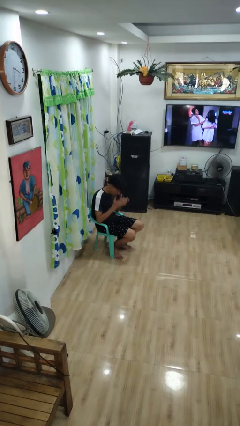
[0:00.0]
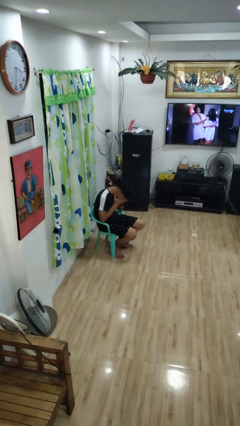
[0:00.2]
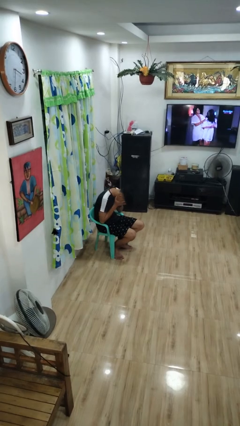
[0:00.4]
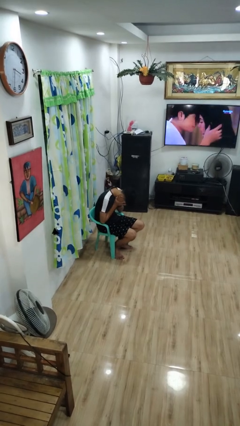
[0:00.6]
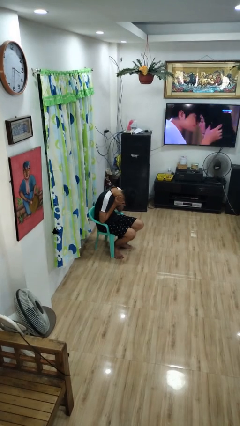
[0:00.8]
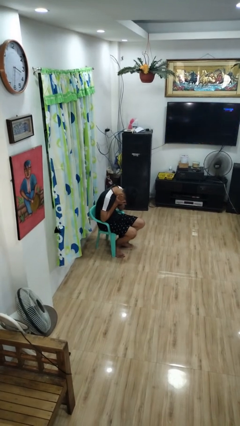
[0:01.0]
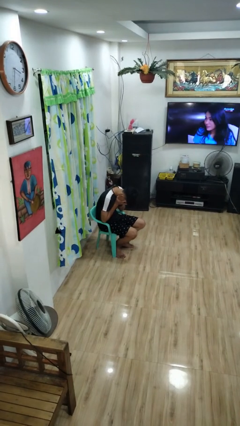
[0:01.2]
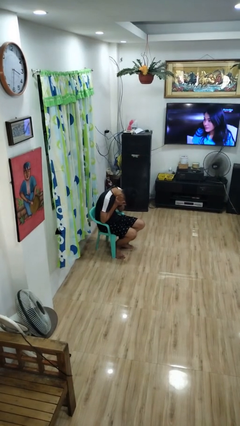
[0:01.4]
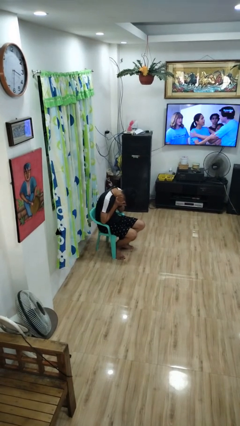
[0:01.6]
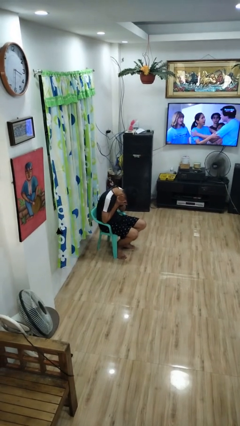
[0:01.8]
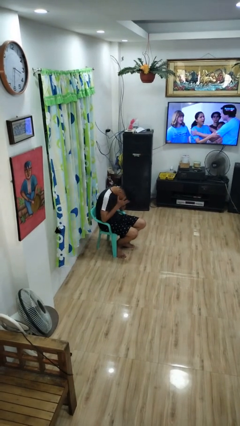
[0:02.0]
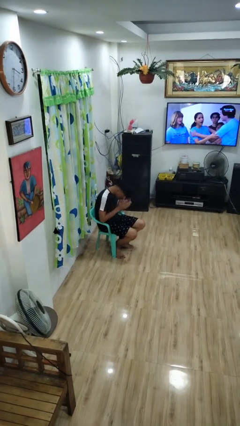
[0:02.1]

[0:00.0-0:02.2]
person covers face with hands

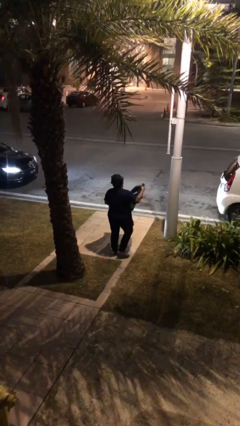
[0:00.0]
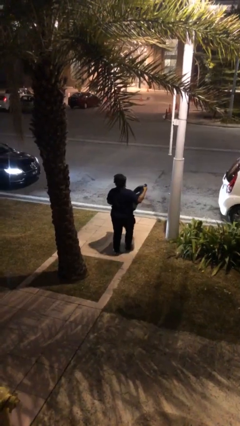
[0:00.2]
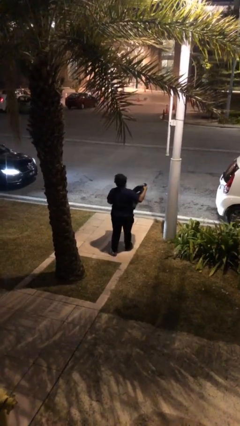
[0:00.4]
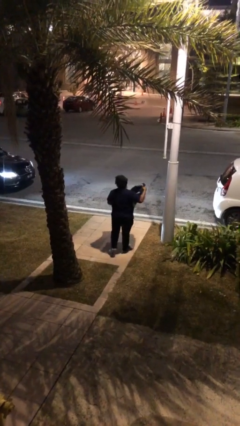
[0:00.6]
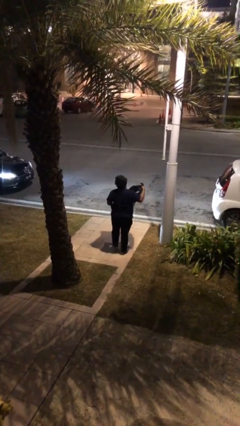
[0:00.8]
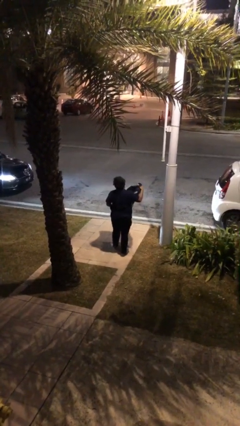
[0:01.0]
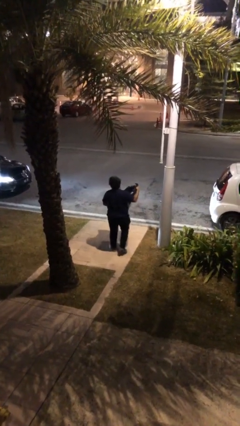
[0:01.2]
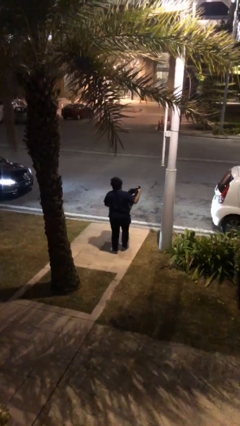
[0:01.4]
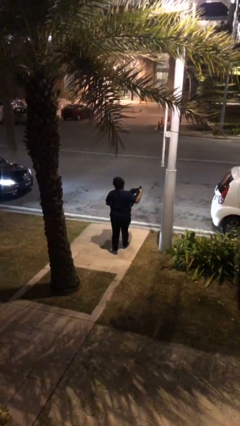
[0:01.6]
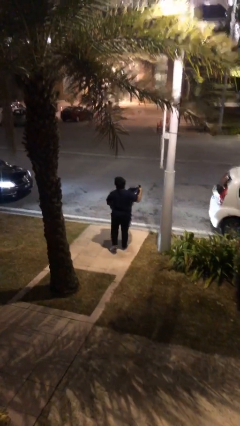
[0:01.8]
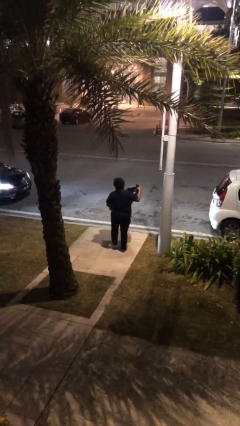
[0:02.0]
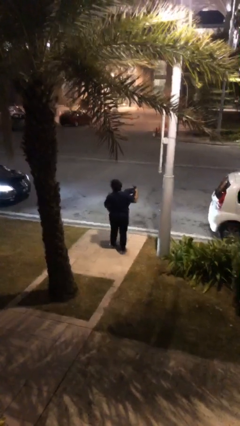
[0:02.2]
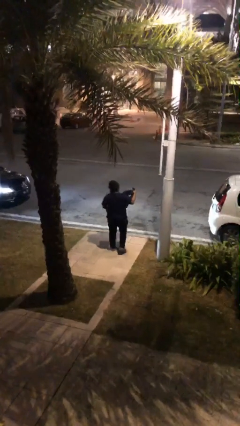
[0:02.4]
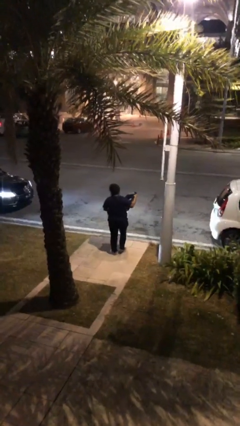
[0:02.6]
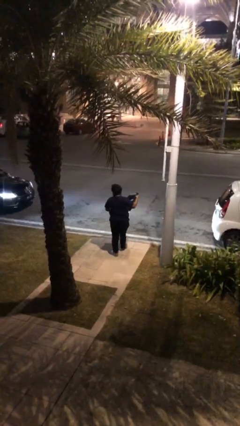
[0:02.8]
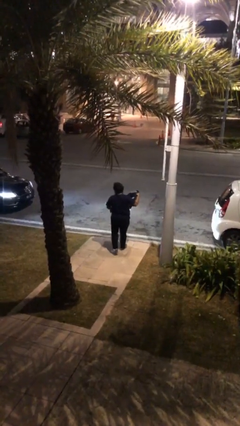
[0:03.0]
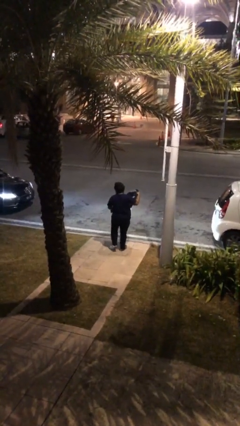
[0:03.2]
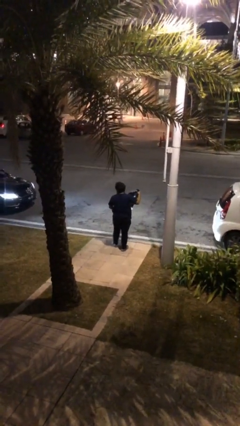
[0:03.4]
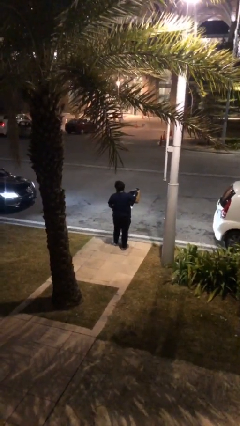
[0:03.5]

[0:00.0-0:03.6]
person carries heavy object

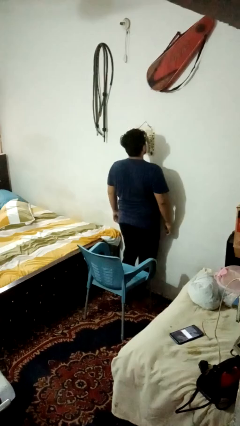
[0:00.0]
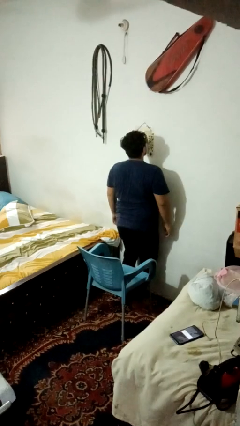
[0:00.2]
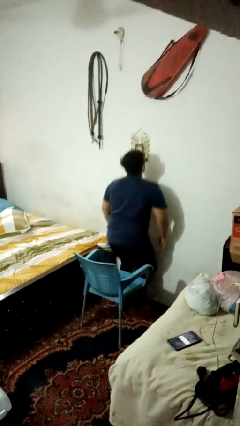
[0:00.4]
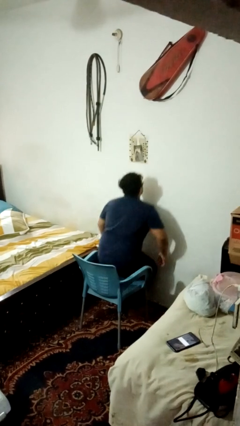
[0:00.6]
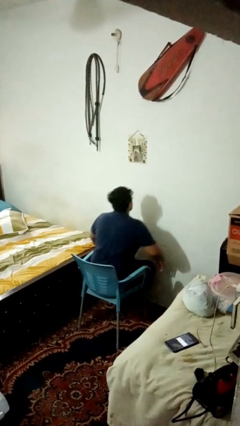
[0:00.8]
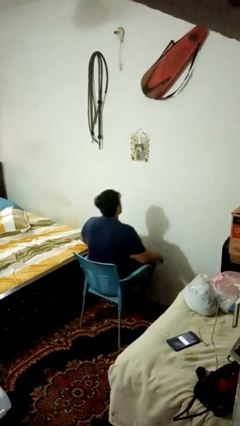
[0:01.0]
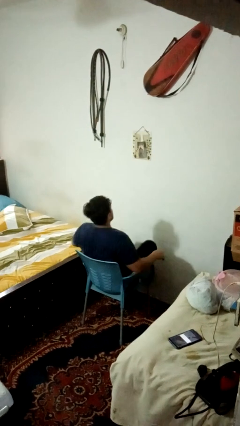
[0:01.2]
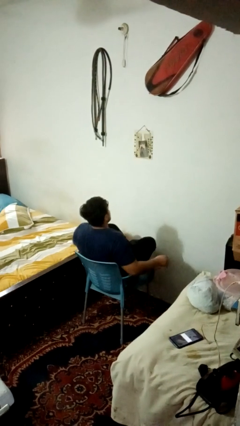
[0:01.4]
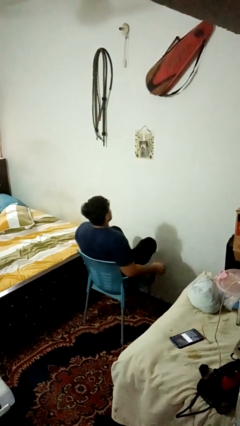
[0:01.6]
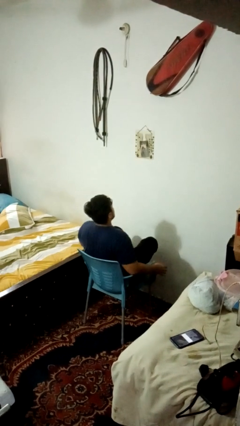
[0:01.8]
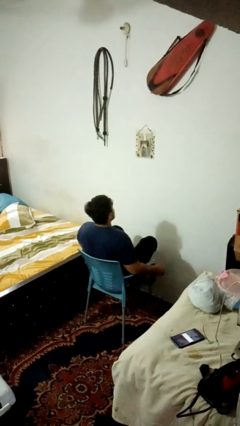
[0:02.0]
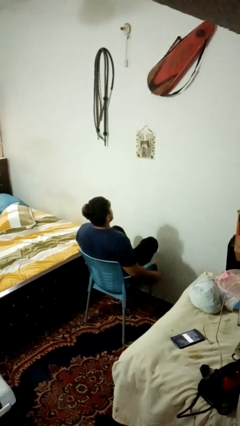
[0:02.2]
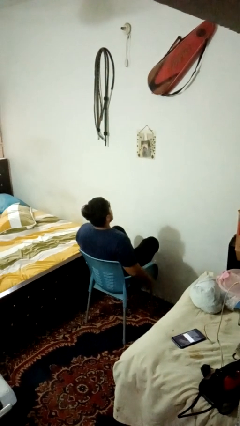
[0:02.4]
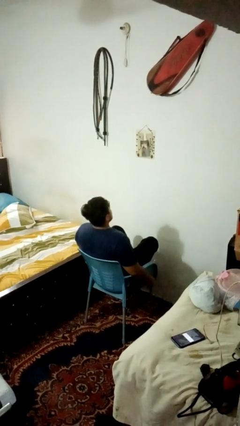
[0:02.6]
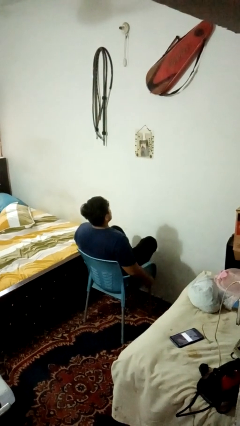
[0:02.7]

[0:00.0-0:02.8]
person crosses legs

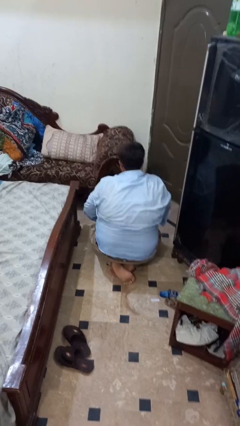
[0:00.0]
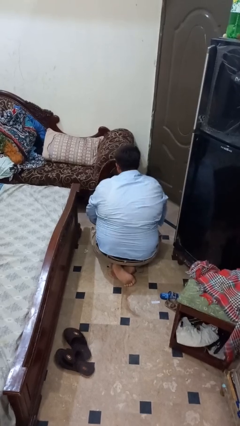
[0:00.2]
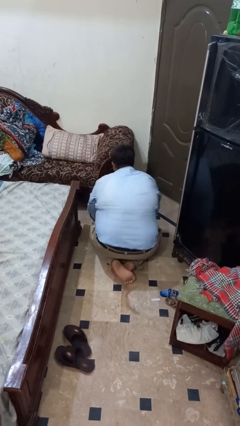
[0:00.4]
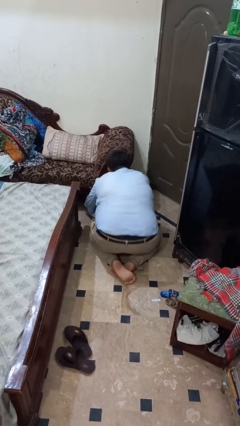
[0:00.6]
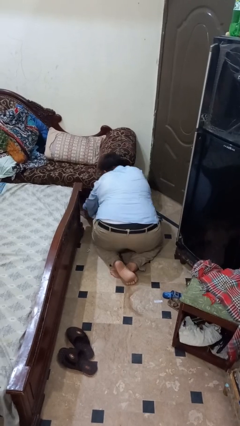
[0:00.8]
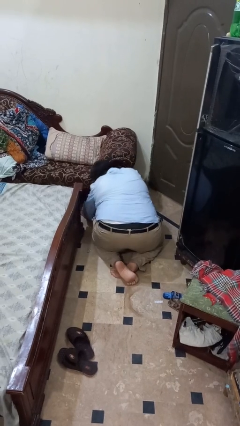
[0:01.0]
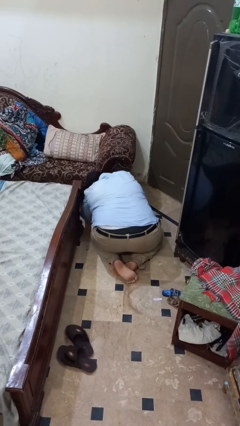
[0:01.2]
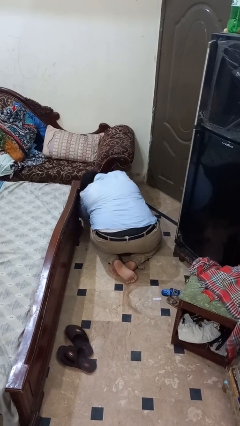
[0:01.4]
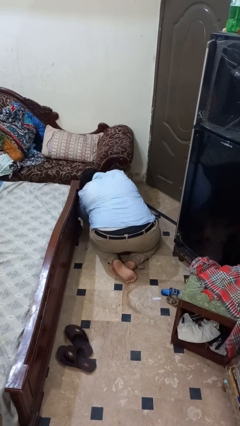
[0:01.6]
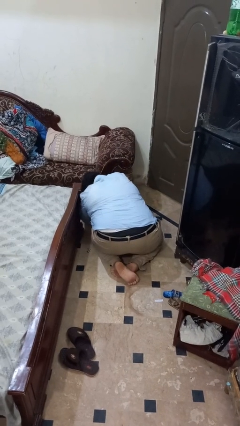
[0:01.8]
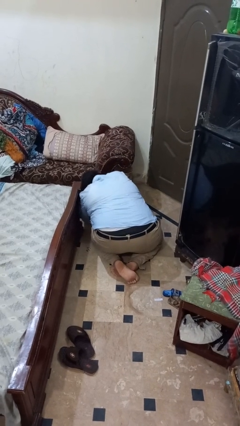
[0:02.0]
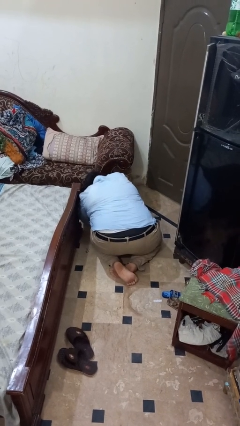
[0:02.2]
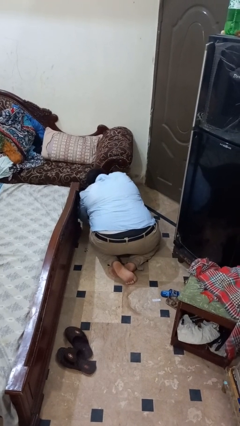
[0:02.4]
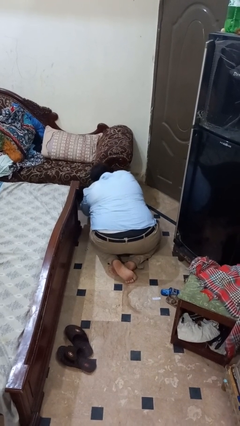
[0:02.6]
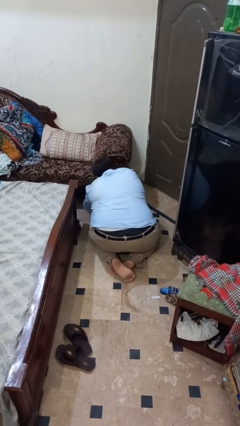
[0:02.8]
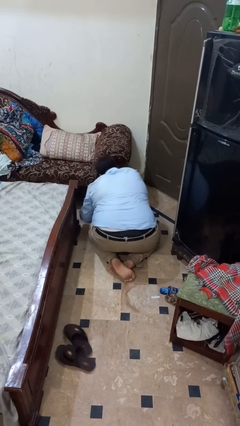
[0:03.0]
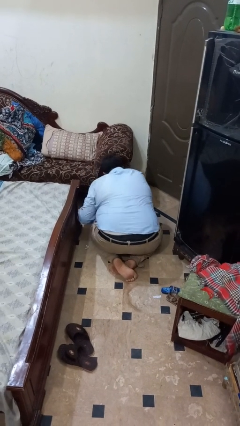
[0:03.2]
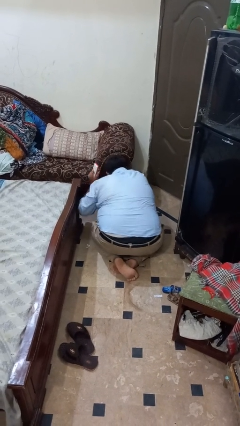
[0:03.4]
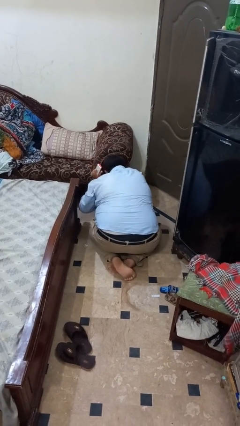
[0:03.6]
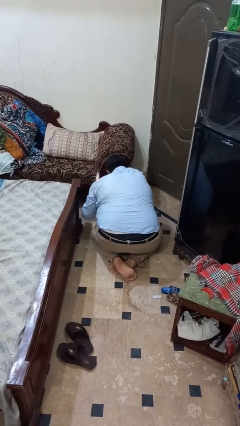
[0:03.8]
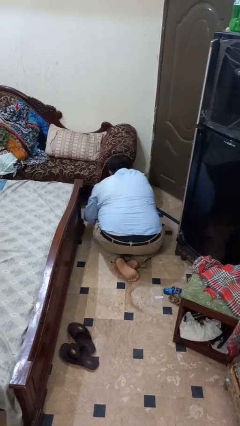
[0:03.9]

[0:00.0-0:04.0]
person searches under couch

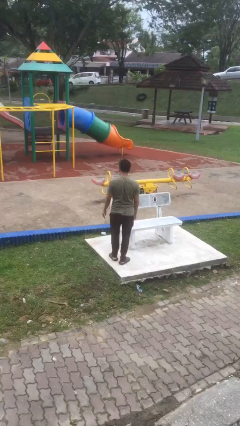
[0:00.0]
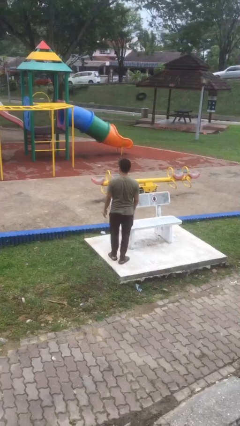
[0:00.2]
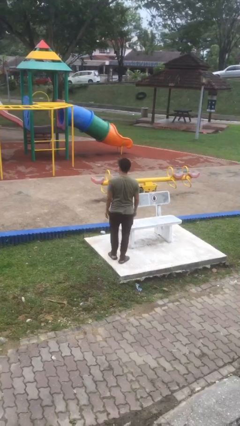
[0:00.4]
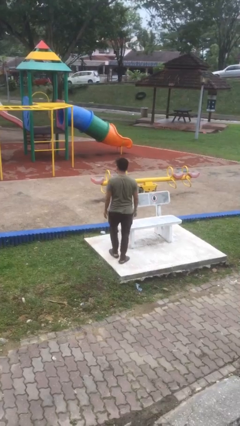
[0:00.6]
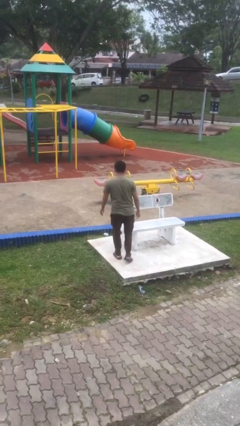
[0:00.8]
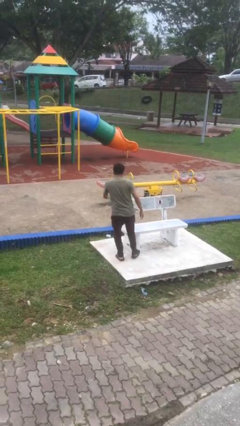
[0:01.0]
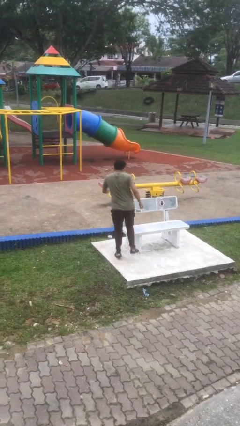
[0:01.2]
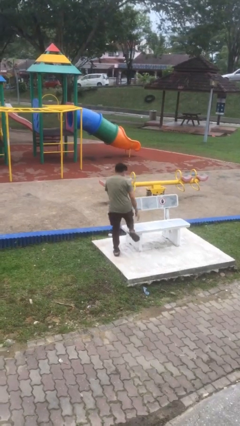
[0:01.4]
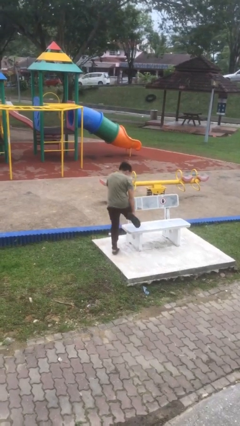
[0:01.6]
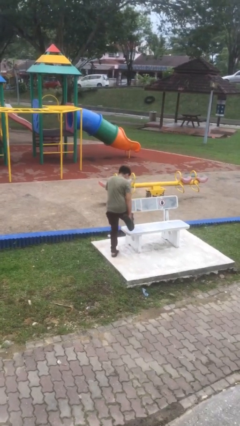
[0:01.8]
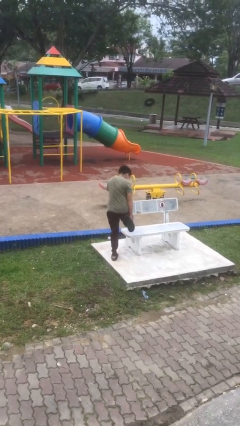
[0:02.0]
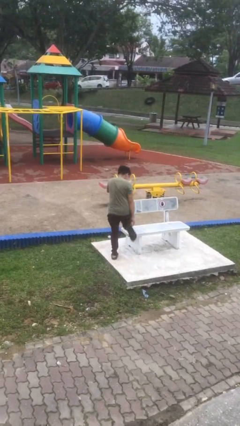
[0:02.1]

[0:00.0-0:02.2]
person stubs toe

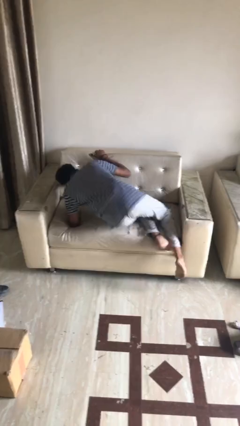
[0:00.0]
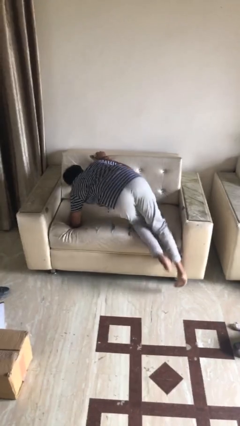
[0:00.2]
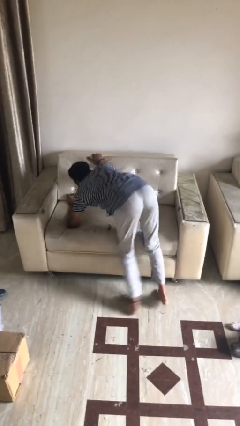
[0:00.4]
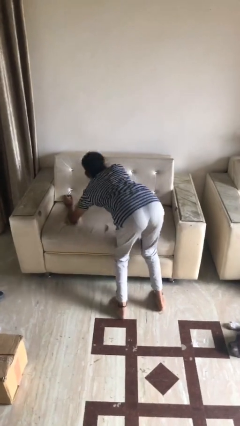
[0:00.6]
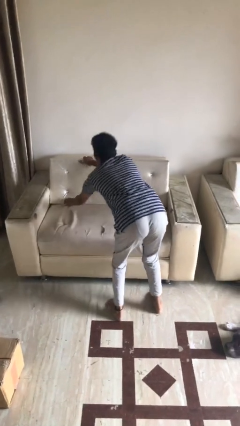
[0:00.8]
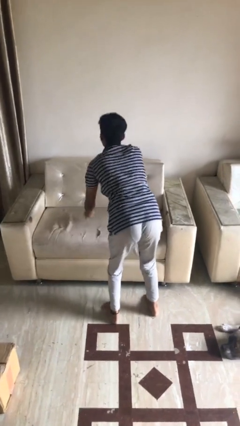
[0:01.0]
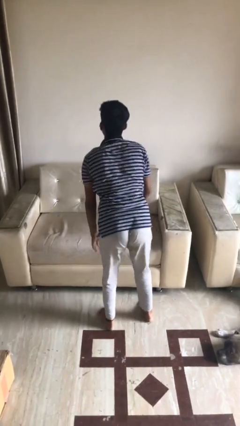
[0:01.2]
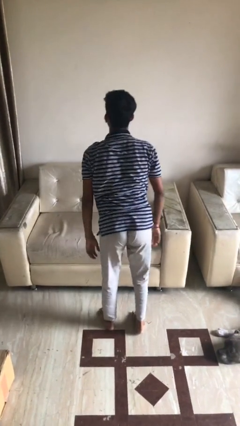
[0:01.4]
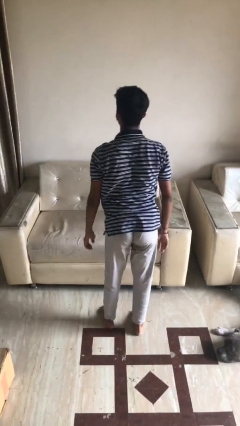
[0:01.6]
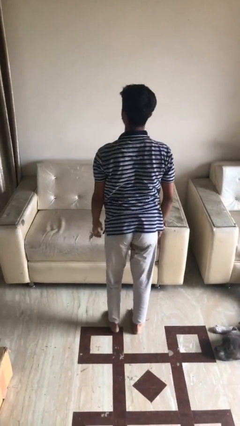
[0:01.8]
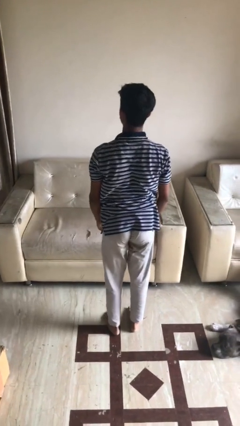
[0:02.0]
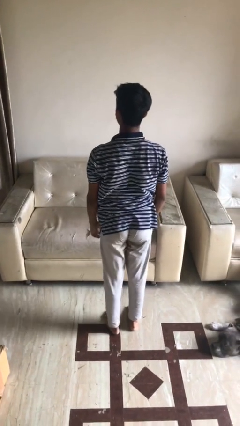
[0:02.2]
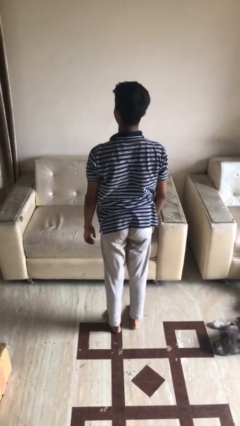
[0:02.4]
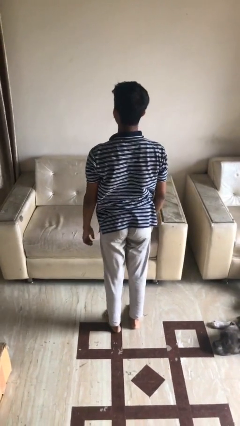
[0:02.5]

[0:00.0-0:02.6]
person stands up

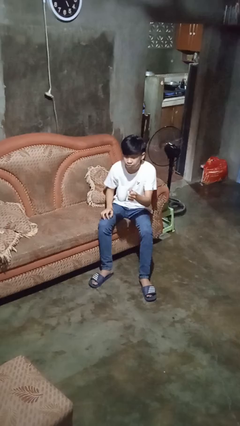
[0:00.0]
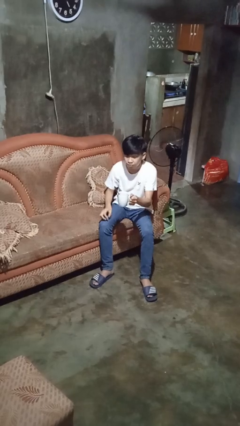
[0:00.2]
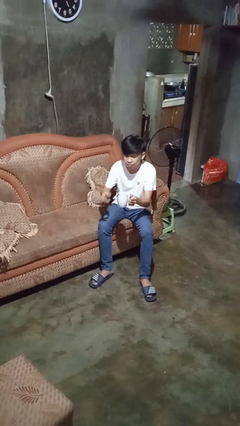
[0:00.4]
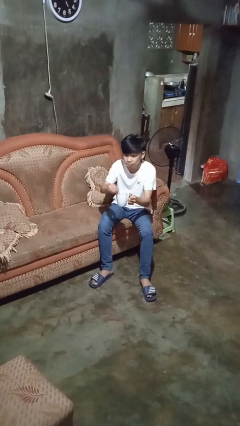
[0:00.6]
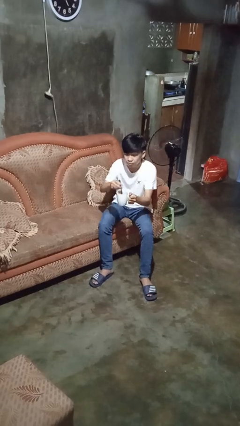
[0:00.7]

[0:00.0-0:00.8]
person stirs mug
